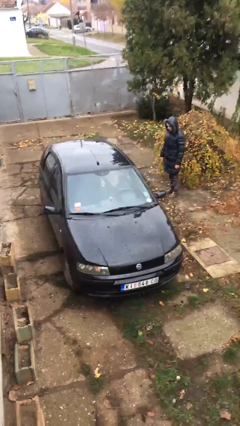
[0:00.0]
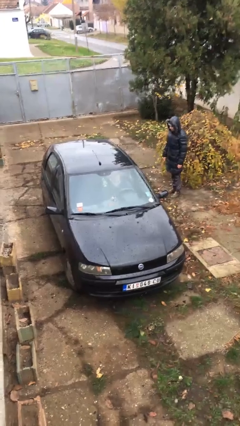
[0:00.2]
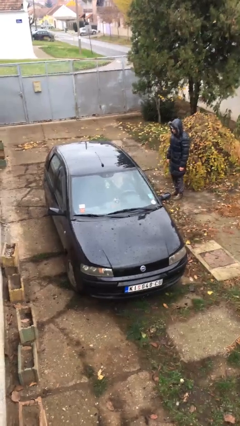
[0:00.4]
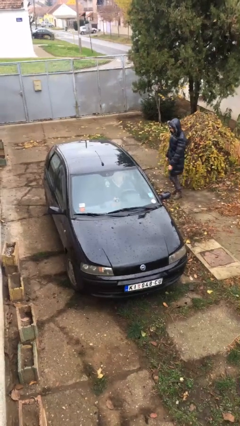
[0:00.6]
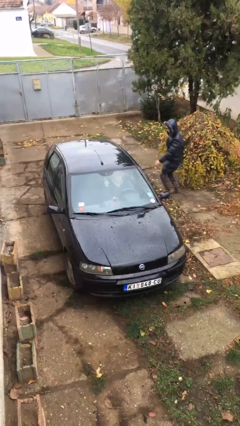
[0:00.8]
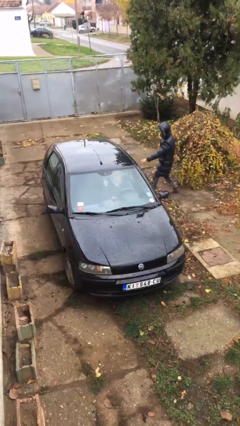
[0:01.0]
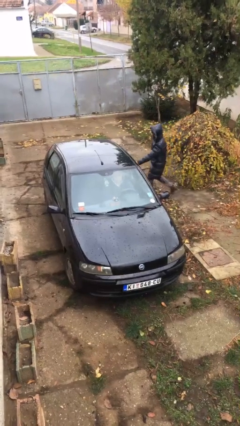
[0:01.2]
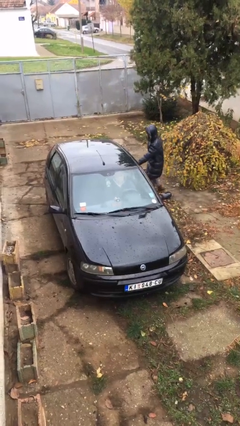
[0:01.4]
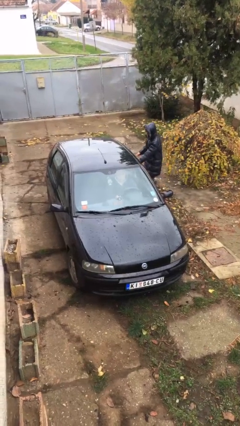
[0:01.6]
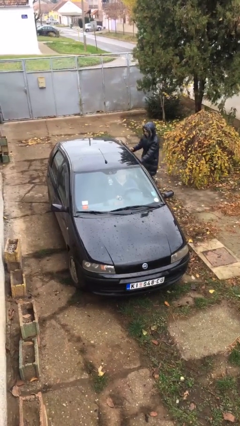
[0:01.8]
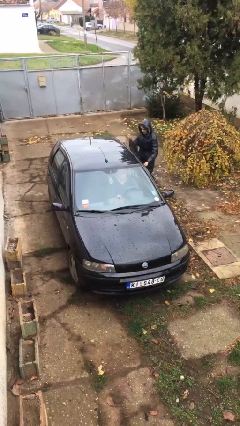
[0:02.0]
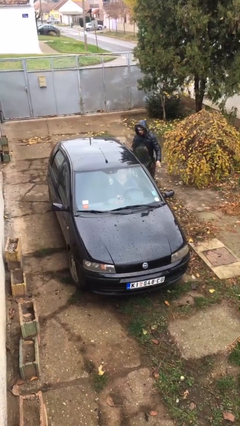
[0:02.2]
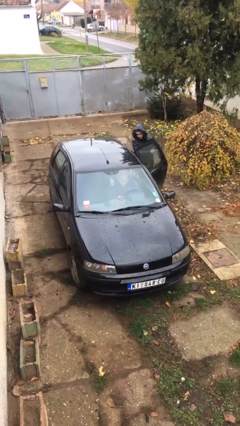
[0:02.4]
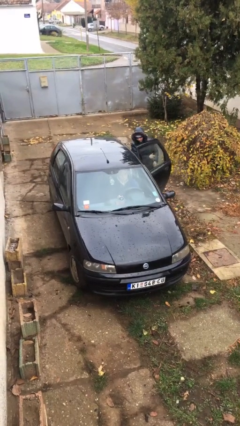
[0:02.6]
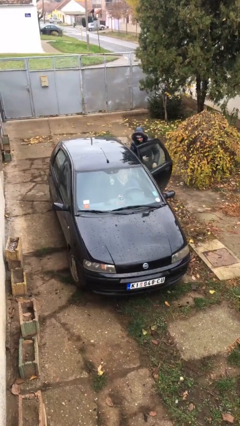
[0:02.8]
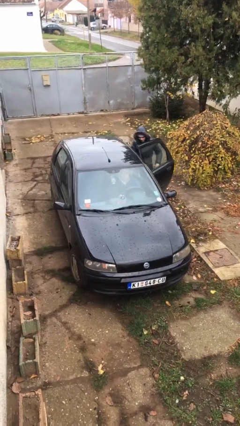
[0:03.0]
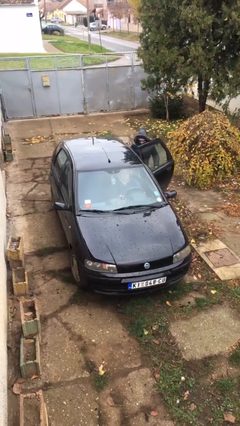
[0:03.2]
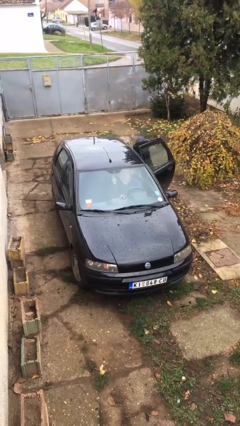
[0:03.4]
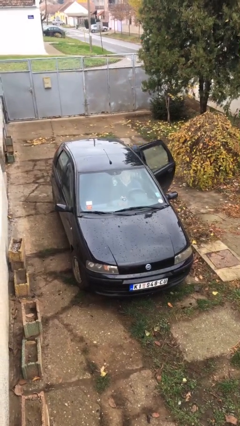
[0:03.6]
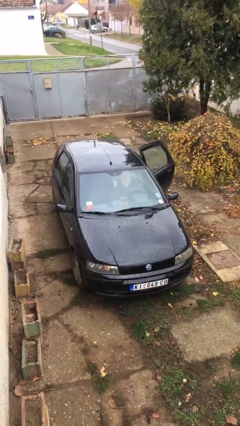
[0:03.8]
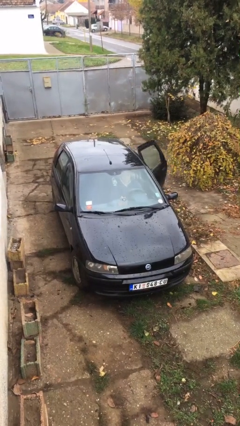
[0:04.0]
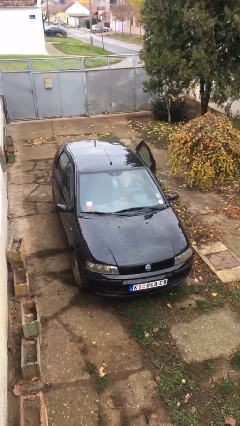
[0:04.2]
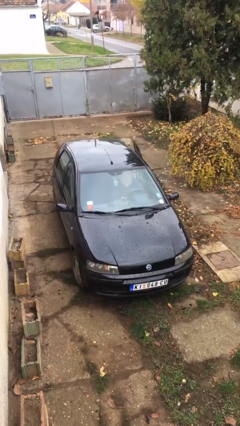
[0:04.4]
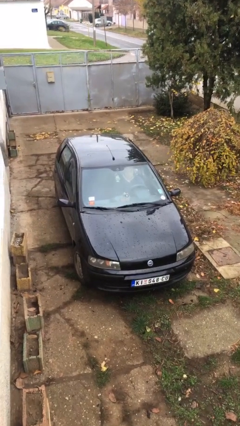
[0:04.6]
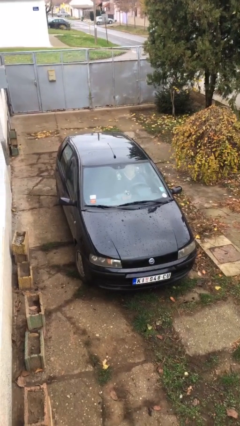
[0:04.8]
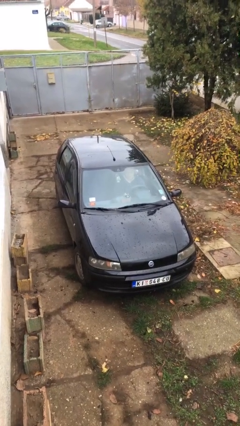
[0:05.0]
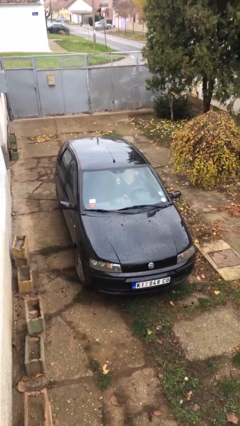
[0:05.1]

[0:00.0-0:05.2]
car picks up person

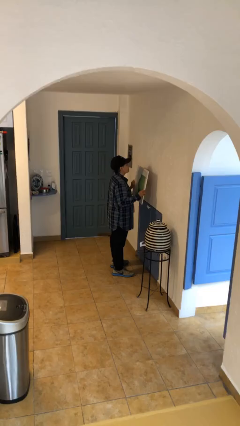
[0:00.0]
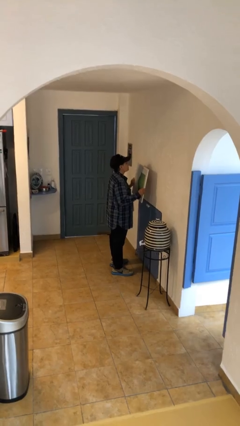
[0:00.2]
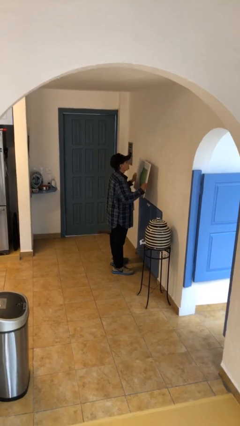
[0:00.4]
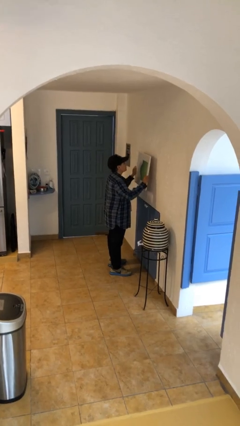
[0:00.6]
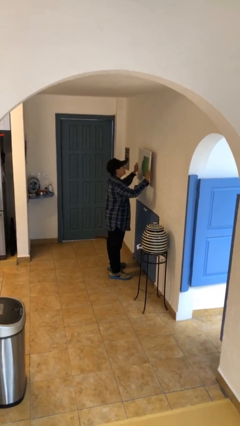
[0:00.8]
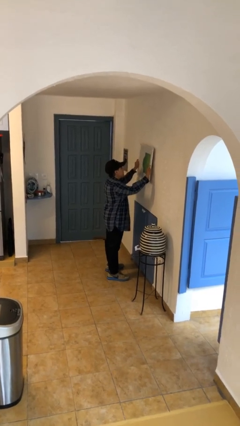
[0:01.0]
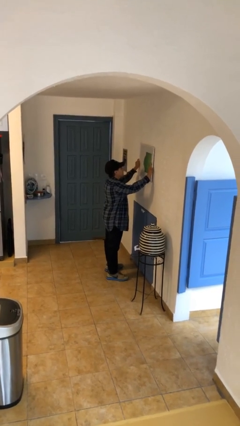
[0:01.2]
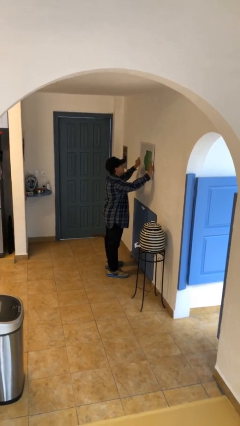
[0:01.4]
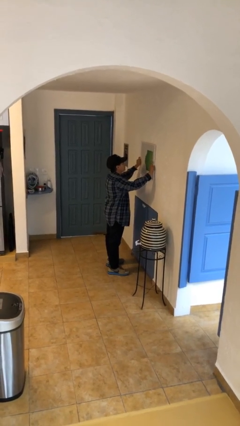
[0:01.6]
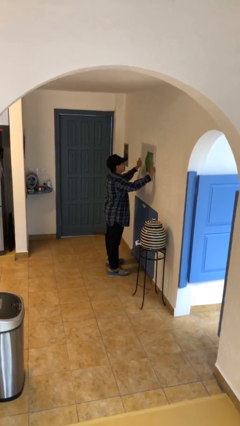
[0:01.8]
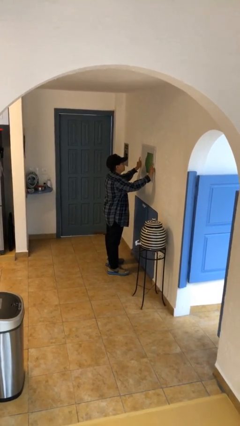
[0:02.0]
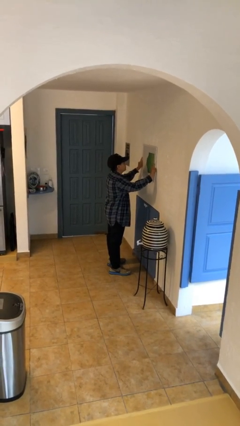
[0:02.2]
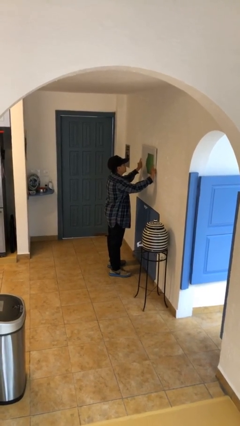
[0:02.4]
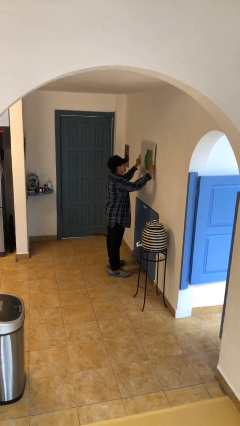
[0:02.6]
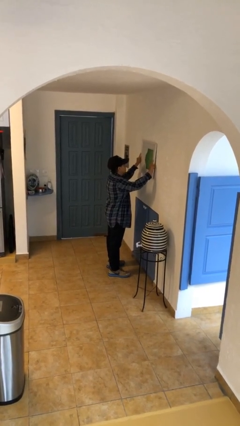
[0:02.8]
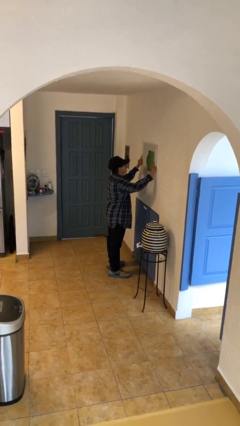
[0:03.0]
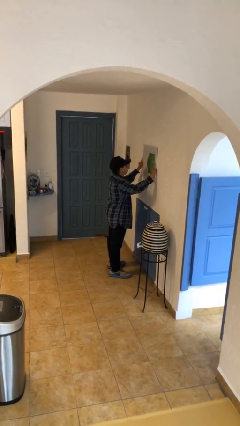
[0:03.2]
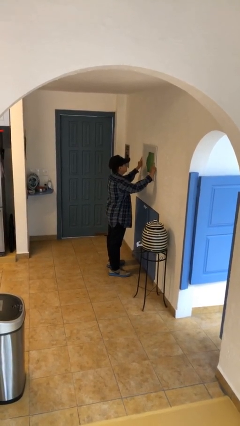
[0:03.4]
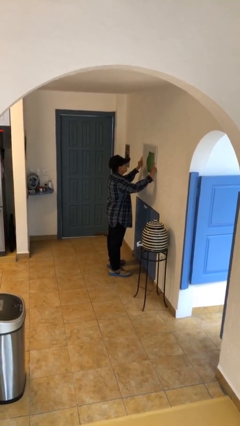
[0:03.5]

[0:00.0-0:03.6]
person puts up picture frame

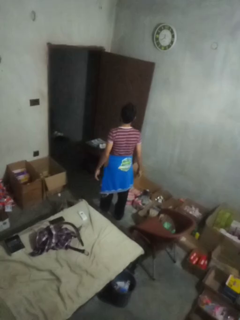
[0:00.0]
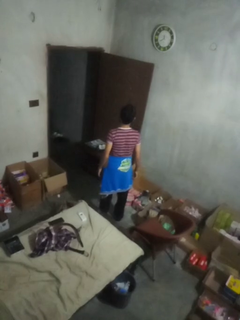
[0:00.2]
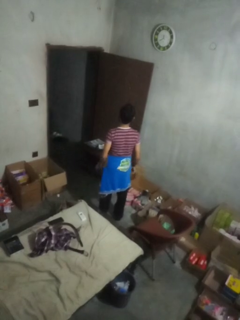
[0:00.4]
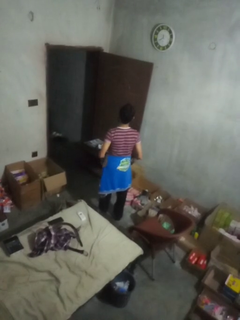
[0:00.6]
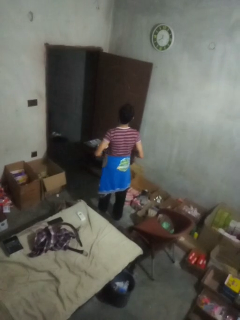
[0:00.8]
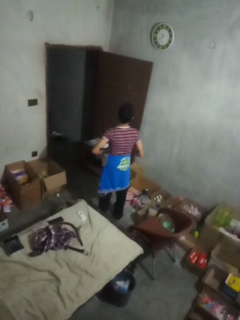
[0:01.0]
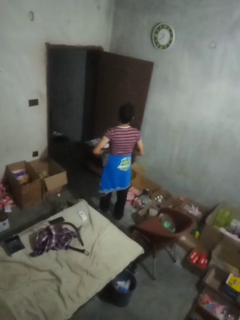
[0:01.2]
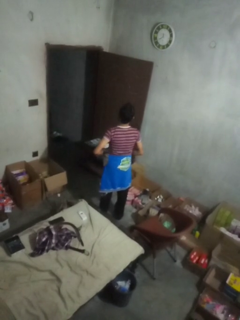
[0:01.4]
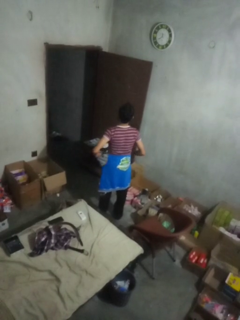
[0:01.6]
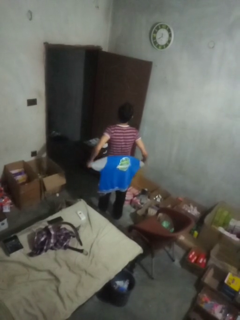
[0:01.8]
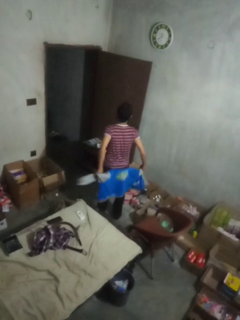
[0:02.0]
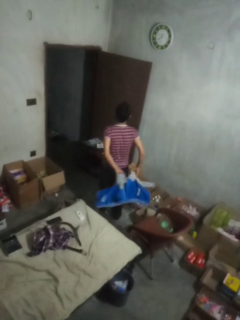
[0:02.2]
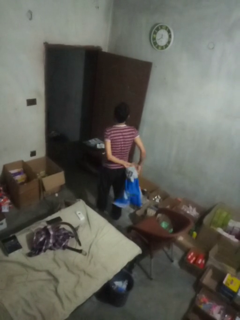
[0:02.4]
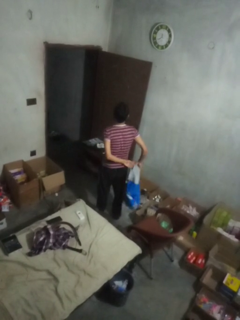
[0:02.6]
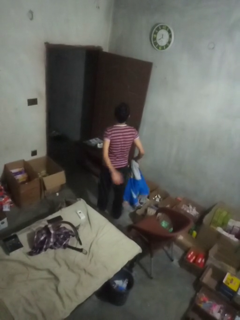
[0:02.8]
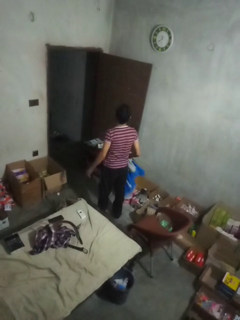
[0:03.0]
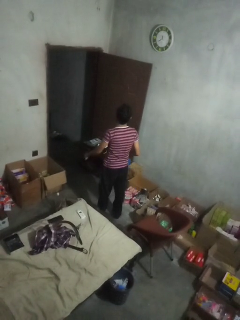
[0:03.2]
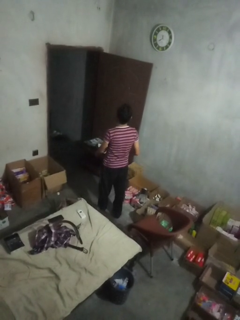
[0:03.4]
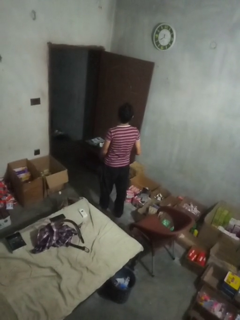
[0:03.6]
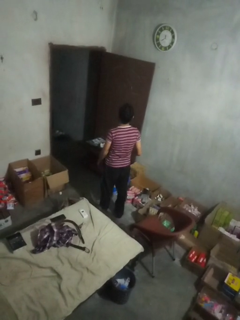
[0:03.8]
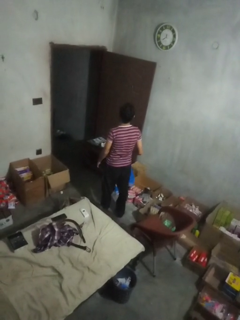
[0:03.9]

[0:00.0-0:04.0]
person unties jacket around waist

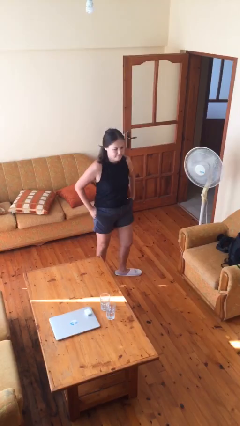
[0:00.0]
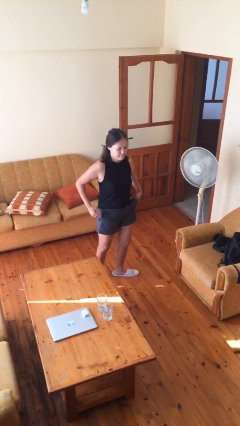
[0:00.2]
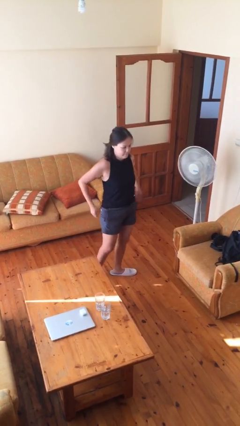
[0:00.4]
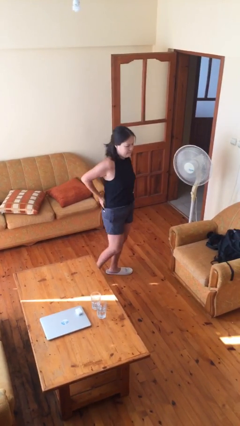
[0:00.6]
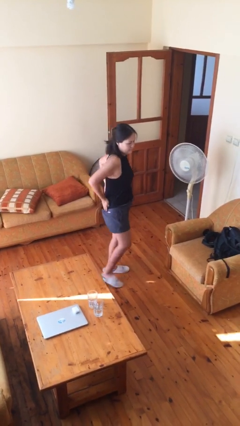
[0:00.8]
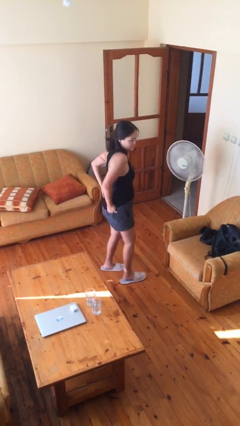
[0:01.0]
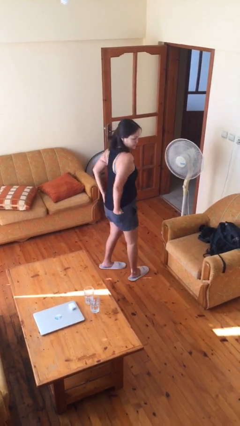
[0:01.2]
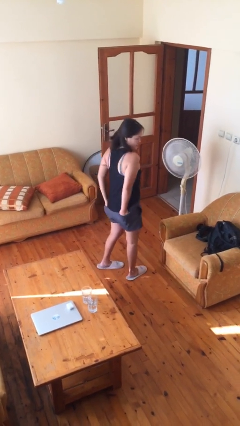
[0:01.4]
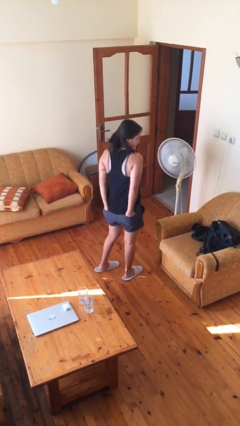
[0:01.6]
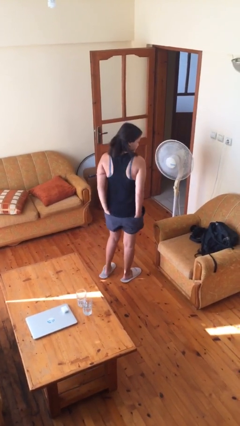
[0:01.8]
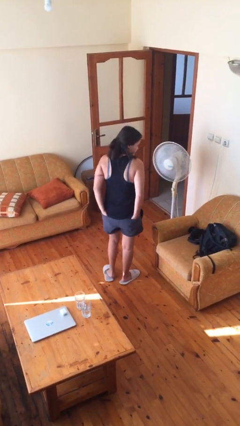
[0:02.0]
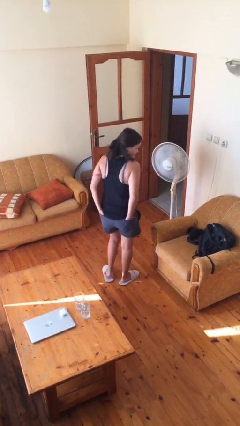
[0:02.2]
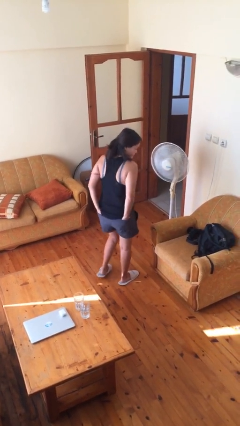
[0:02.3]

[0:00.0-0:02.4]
person puts hands in back pockets

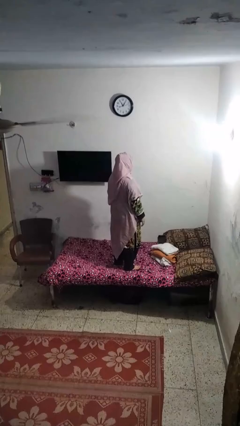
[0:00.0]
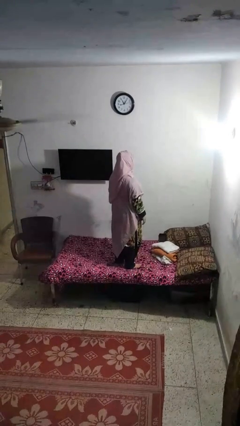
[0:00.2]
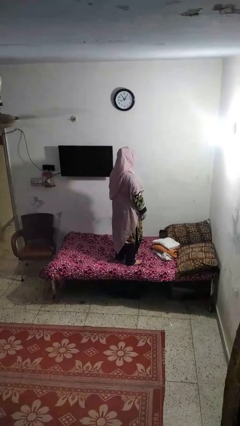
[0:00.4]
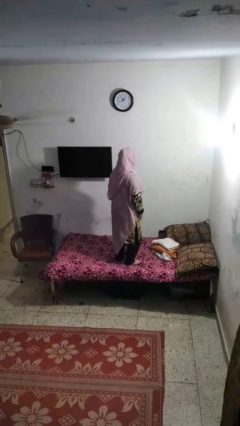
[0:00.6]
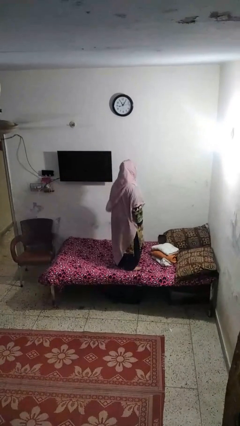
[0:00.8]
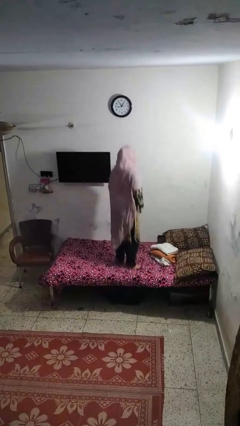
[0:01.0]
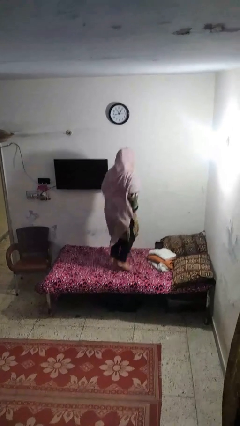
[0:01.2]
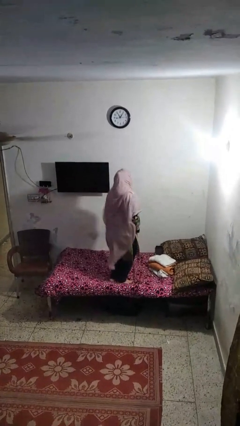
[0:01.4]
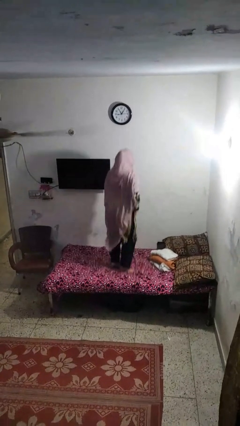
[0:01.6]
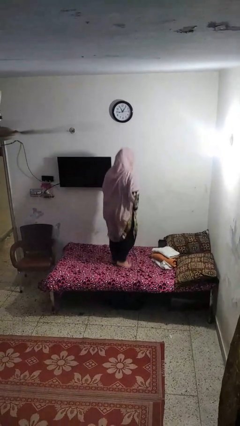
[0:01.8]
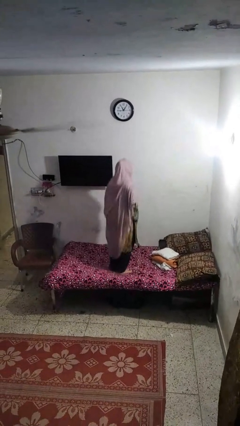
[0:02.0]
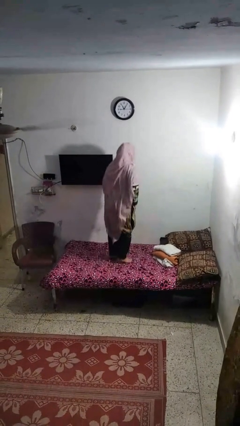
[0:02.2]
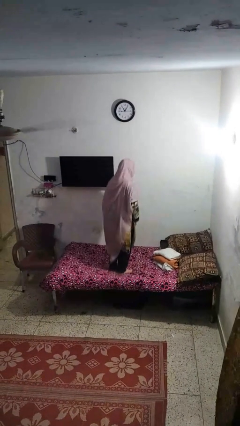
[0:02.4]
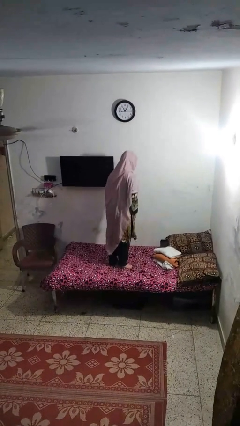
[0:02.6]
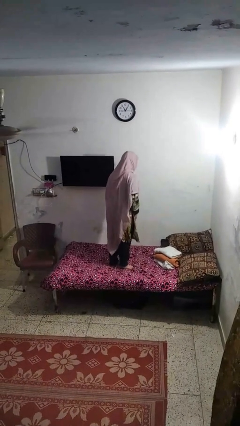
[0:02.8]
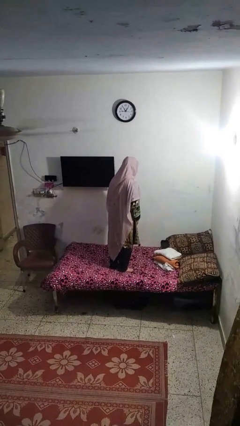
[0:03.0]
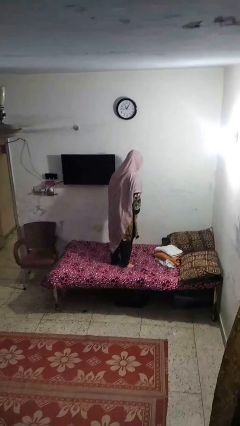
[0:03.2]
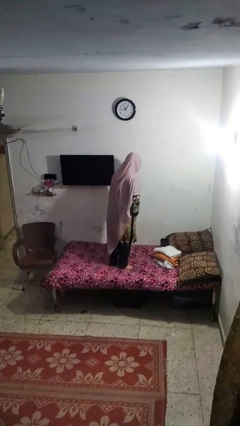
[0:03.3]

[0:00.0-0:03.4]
person jumps on bed
